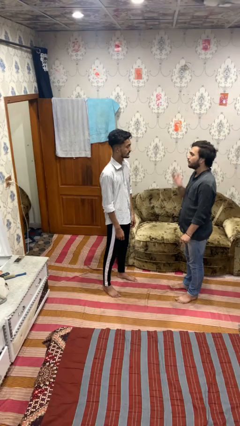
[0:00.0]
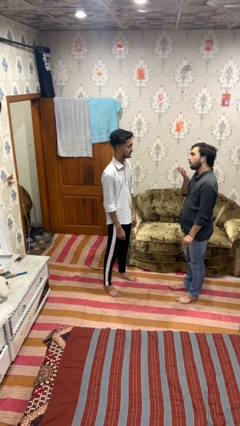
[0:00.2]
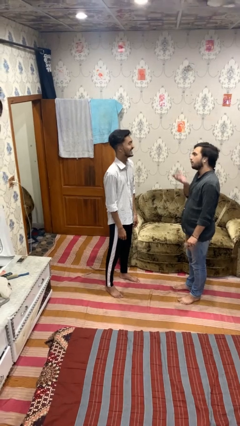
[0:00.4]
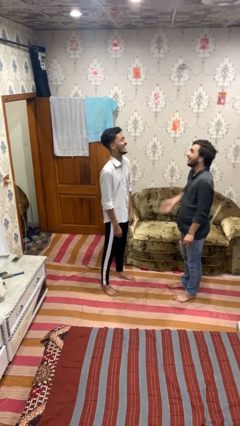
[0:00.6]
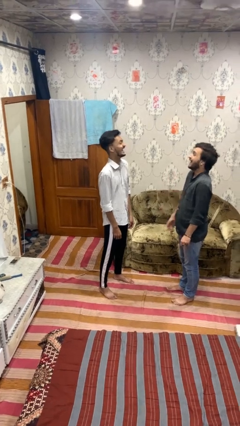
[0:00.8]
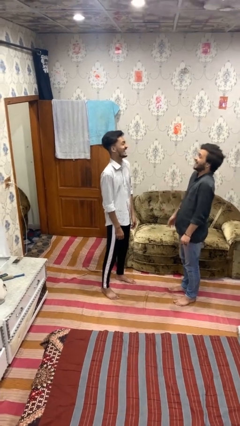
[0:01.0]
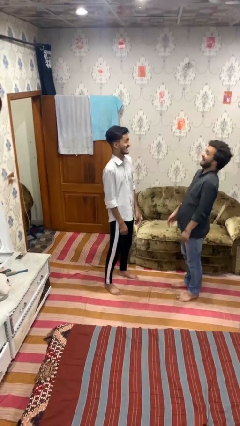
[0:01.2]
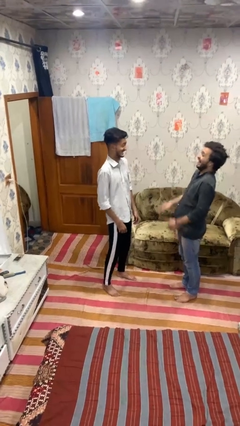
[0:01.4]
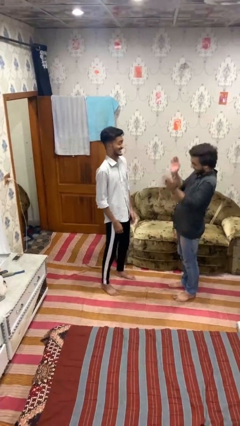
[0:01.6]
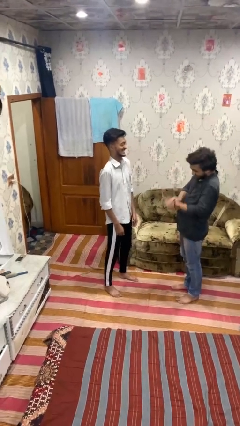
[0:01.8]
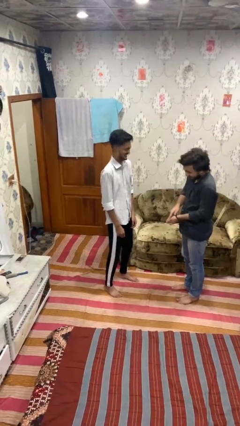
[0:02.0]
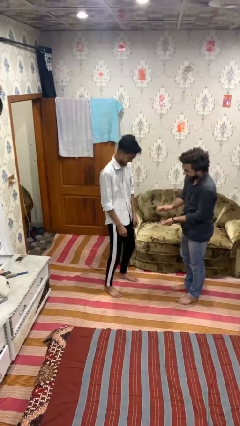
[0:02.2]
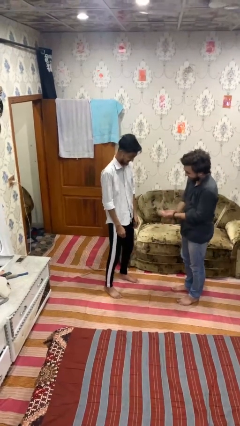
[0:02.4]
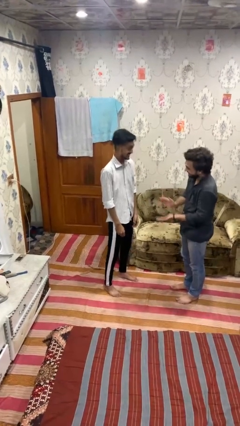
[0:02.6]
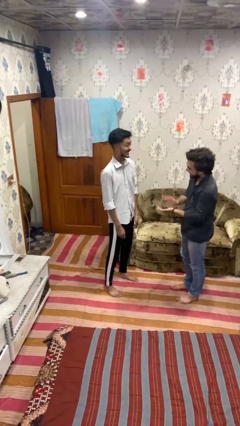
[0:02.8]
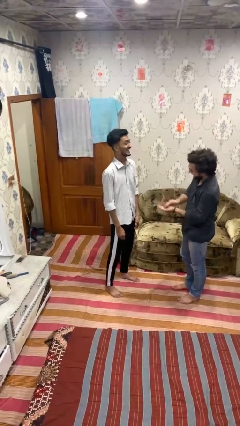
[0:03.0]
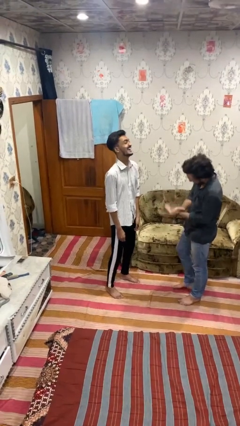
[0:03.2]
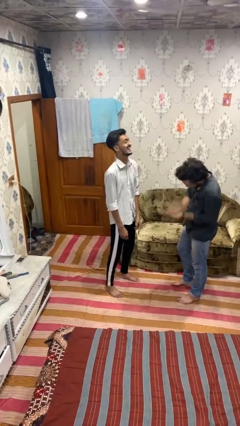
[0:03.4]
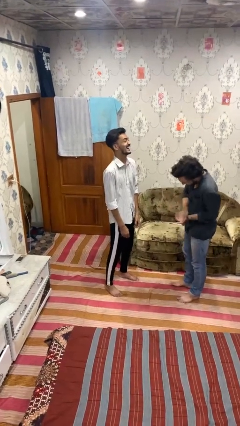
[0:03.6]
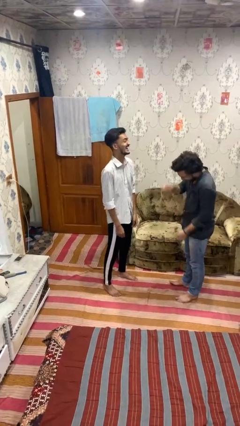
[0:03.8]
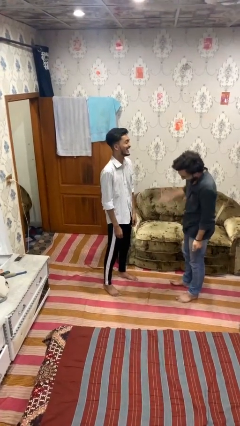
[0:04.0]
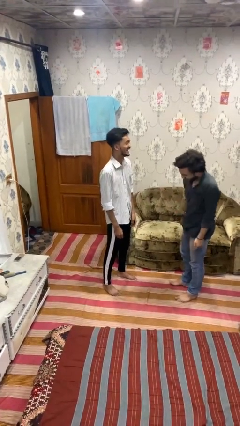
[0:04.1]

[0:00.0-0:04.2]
person laughs with person

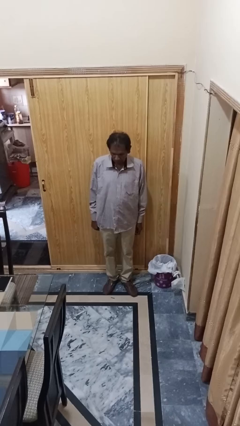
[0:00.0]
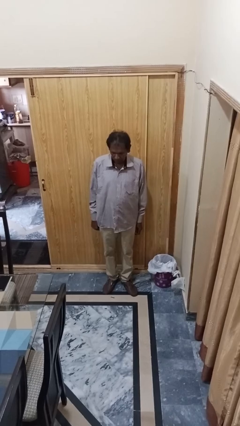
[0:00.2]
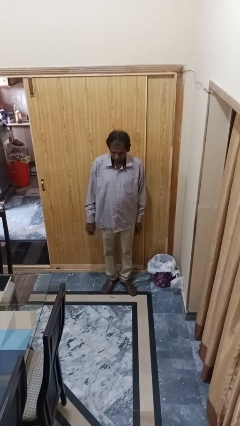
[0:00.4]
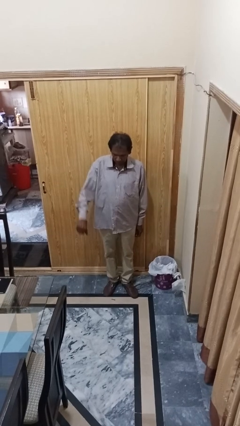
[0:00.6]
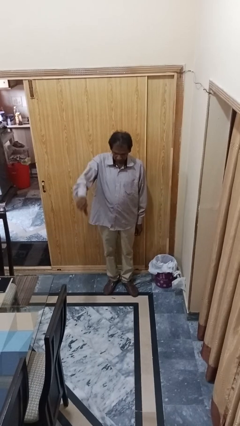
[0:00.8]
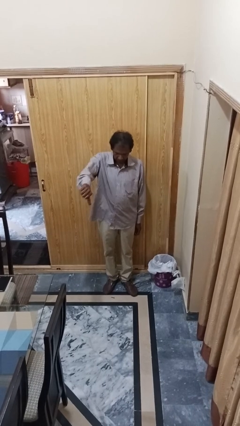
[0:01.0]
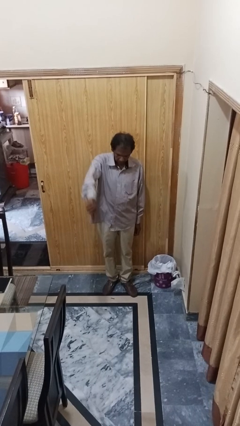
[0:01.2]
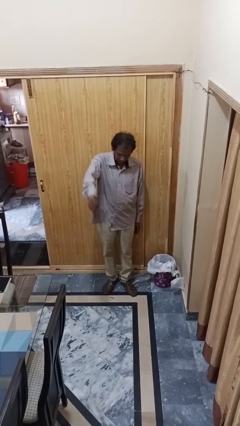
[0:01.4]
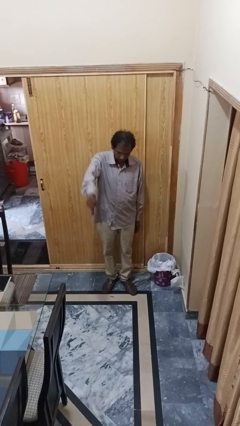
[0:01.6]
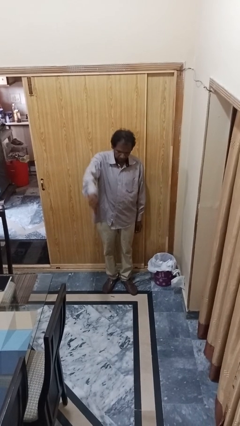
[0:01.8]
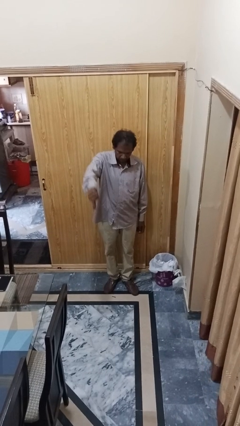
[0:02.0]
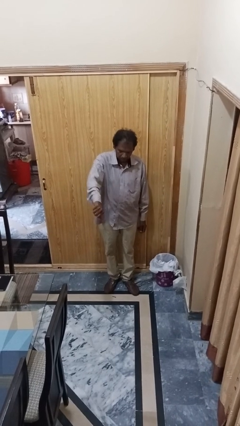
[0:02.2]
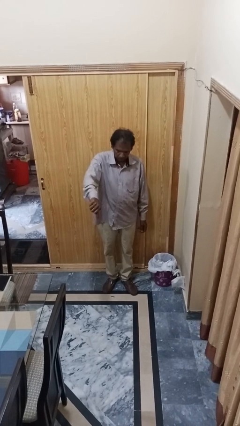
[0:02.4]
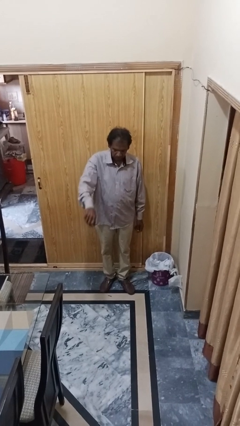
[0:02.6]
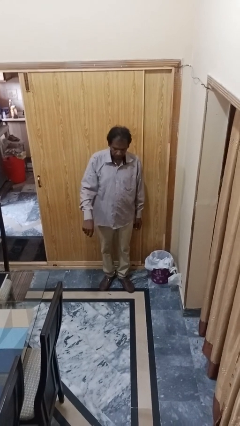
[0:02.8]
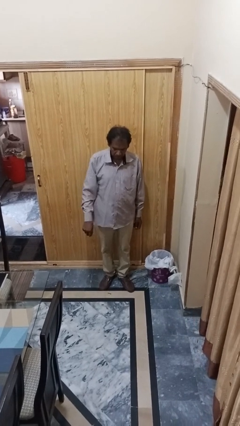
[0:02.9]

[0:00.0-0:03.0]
person gestures thumbs down

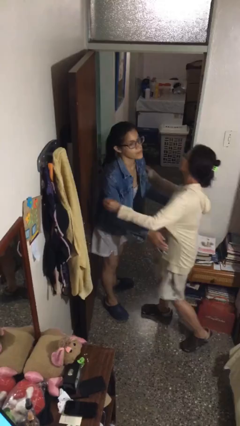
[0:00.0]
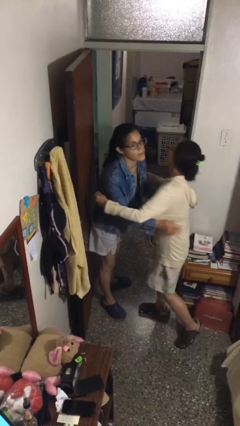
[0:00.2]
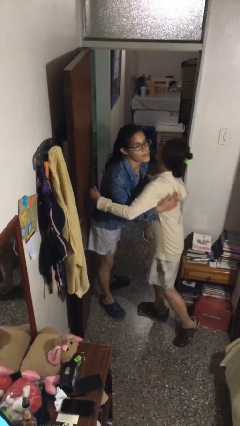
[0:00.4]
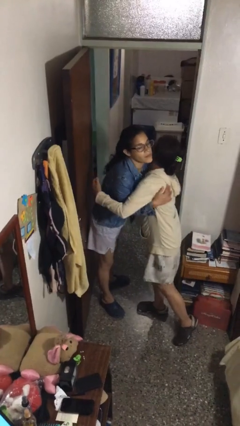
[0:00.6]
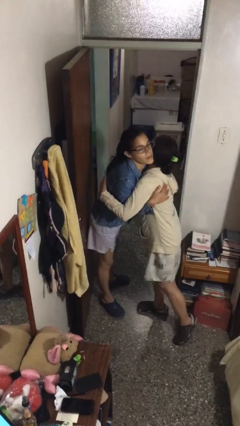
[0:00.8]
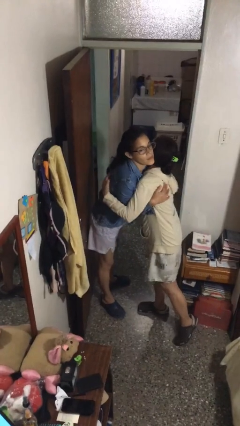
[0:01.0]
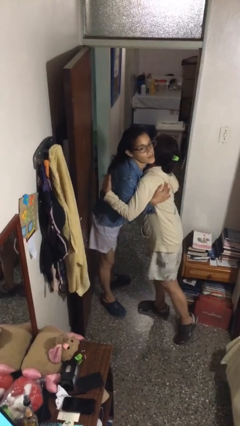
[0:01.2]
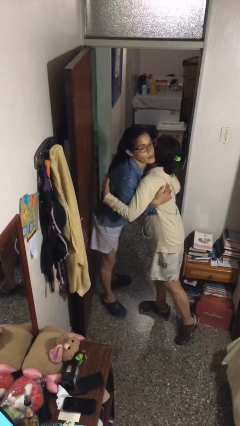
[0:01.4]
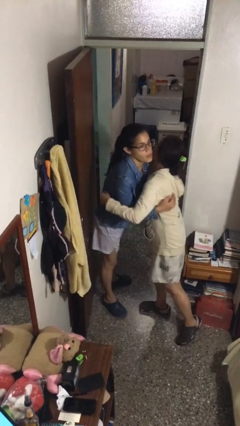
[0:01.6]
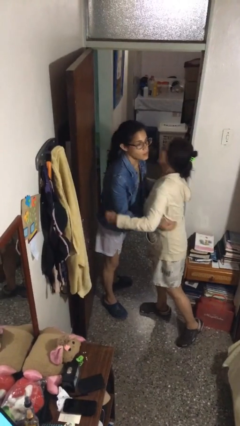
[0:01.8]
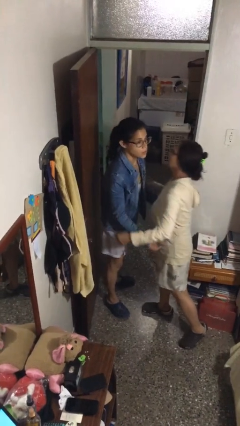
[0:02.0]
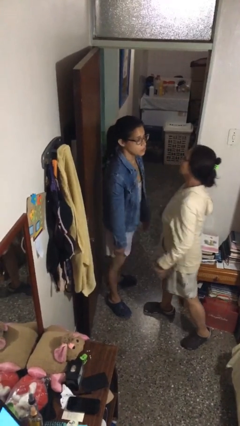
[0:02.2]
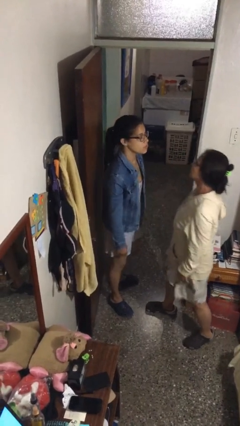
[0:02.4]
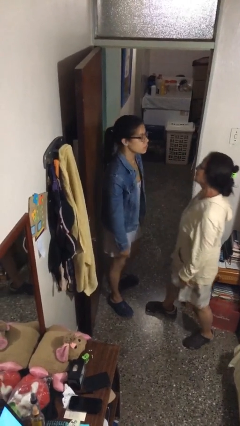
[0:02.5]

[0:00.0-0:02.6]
person embraces person

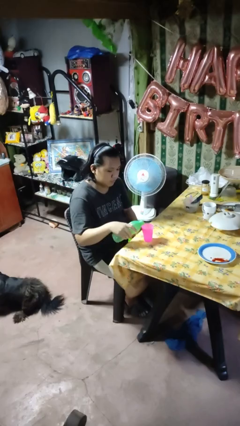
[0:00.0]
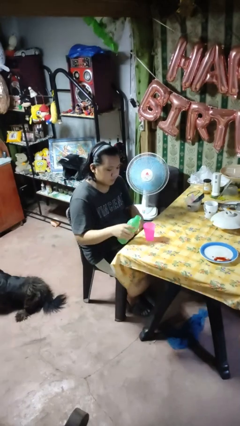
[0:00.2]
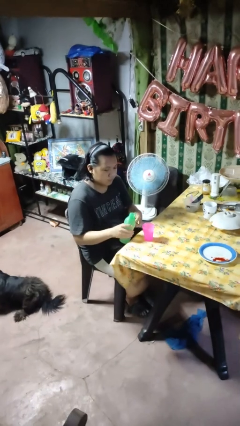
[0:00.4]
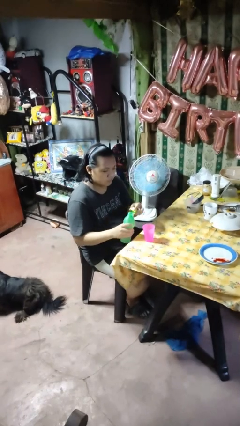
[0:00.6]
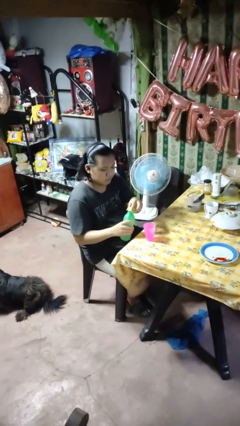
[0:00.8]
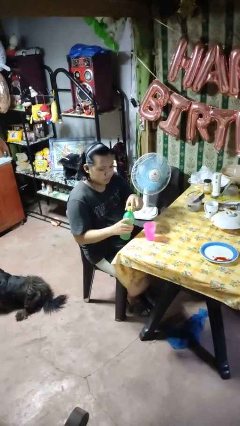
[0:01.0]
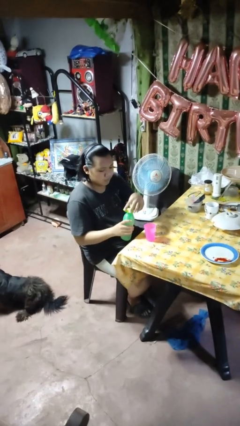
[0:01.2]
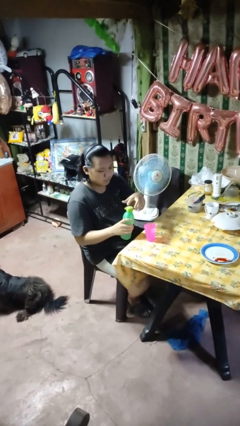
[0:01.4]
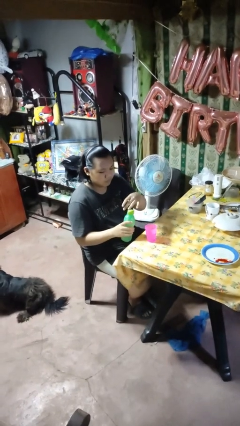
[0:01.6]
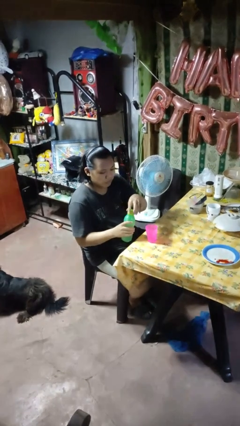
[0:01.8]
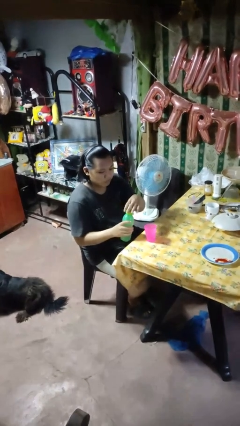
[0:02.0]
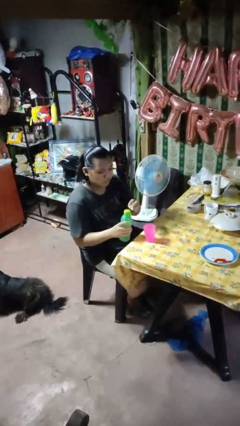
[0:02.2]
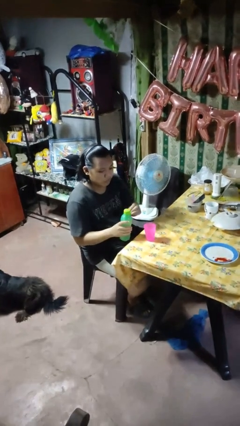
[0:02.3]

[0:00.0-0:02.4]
person screws lid to bottle

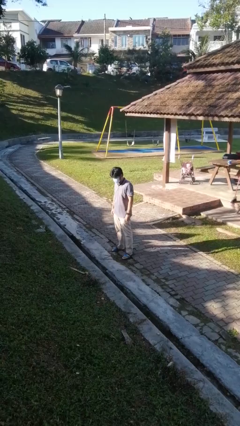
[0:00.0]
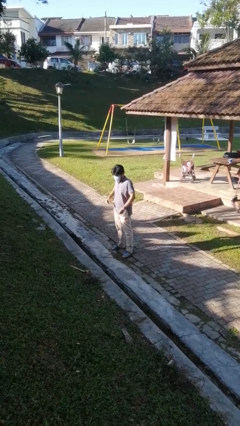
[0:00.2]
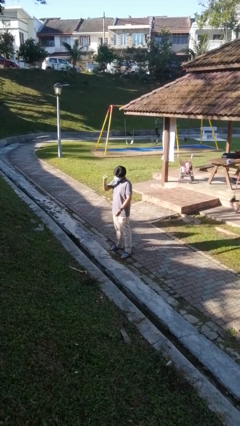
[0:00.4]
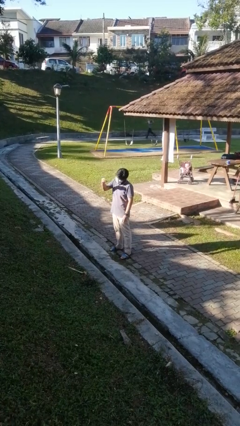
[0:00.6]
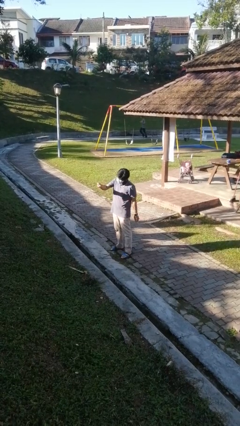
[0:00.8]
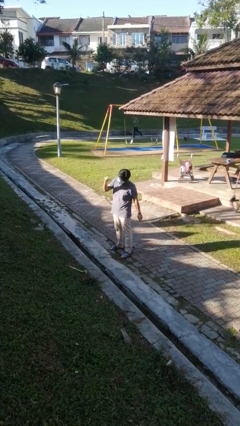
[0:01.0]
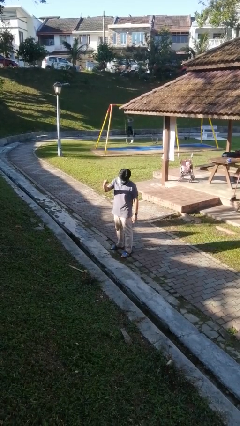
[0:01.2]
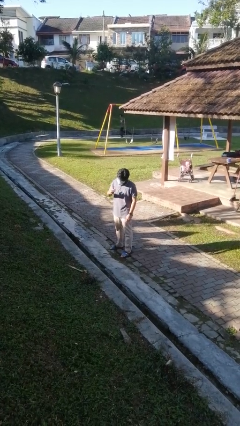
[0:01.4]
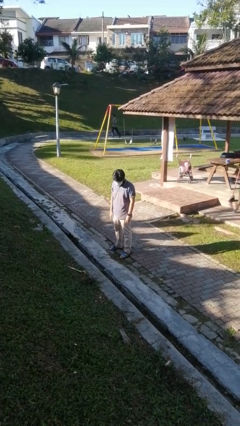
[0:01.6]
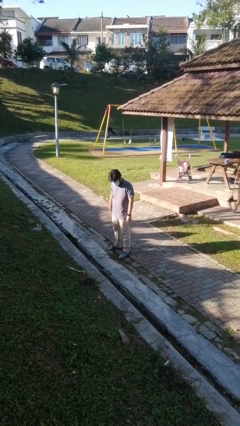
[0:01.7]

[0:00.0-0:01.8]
person snaps fingers

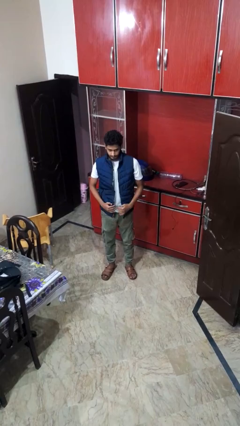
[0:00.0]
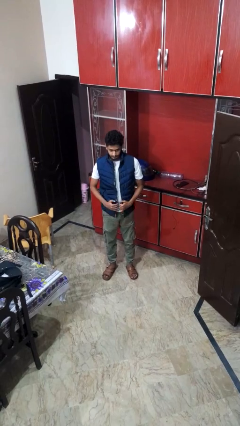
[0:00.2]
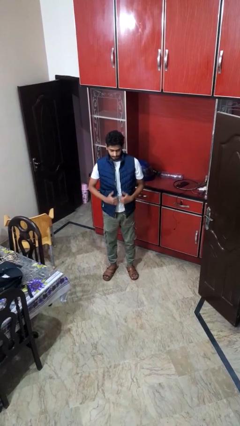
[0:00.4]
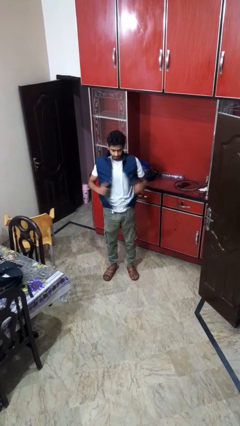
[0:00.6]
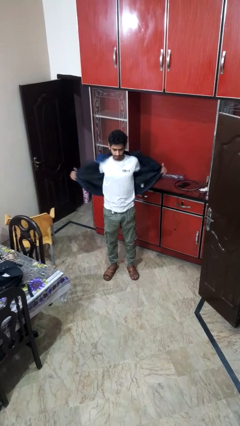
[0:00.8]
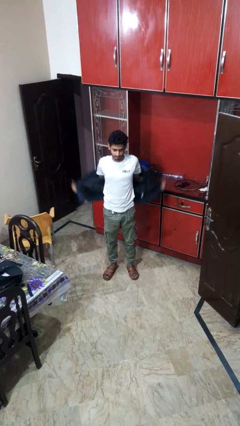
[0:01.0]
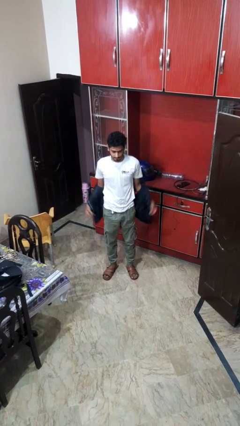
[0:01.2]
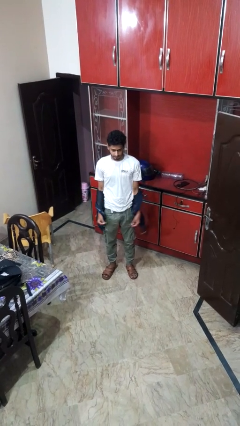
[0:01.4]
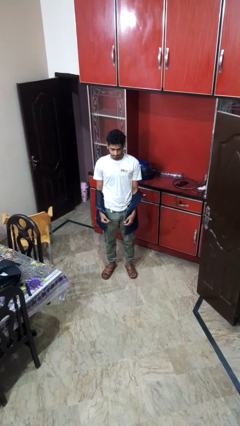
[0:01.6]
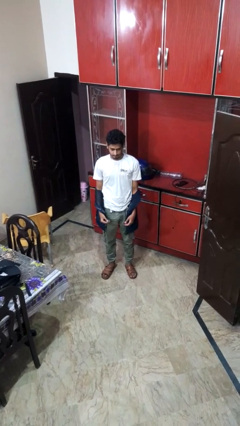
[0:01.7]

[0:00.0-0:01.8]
person takes off jacket

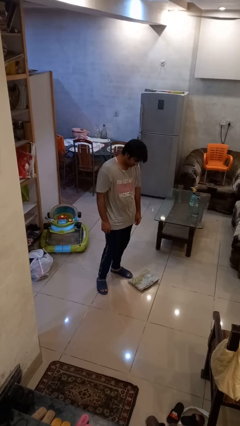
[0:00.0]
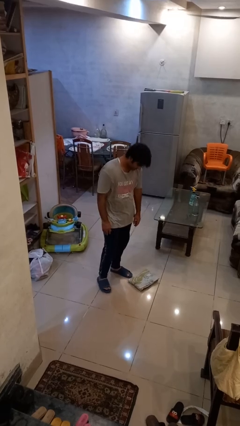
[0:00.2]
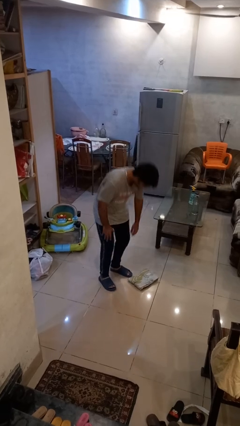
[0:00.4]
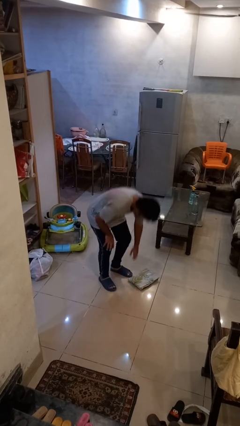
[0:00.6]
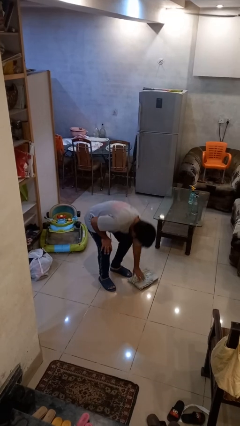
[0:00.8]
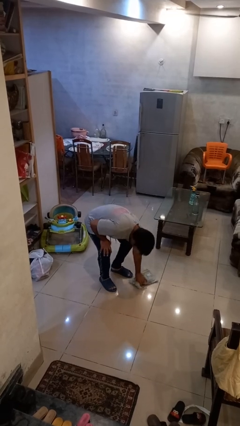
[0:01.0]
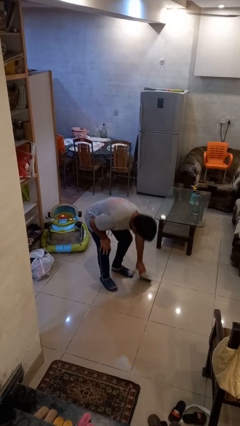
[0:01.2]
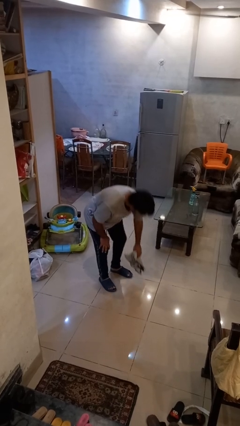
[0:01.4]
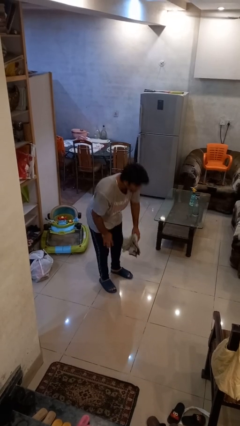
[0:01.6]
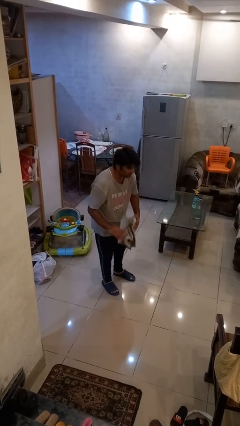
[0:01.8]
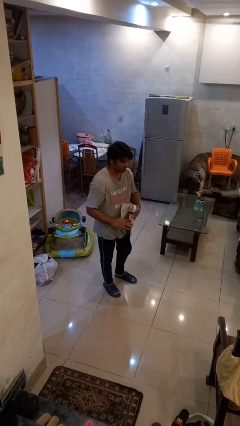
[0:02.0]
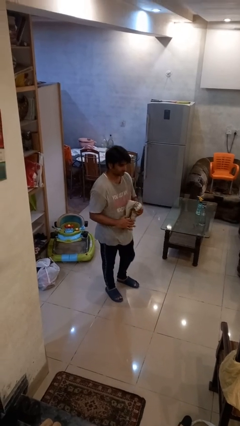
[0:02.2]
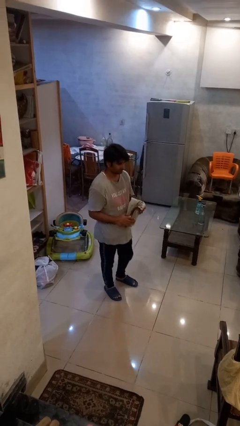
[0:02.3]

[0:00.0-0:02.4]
person picks up object from floor
